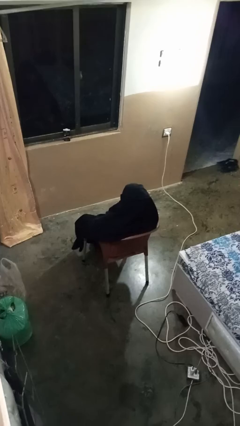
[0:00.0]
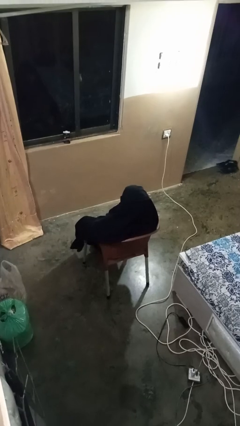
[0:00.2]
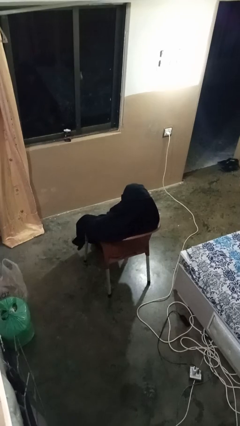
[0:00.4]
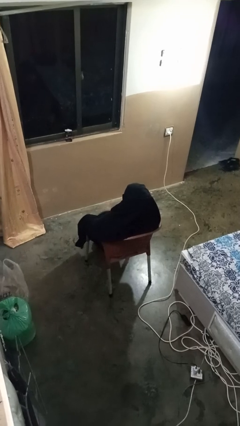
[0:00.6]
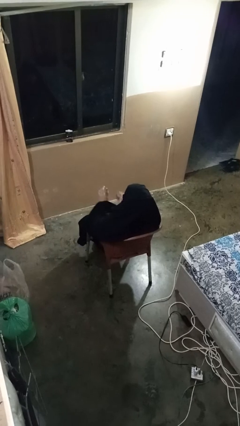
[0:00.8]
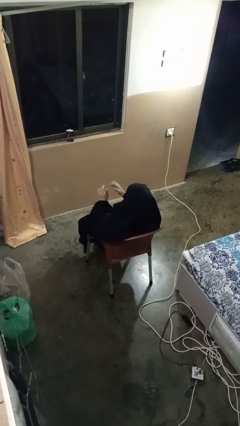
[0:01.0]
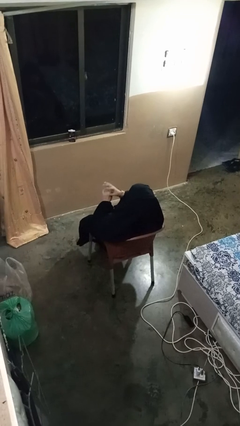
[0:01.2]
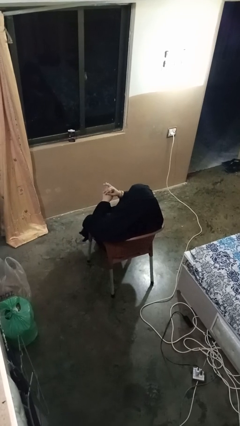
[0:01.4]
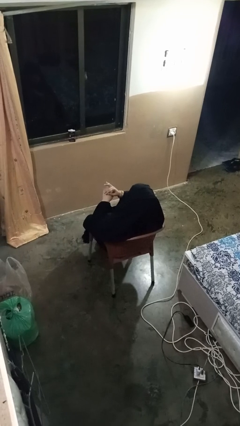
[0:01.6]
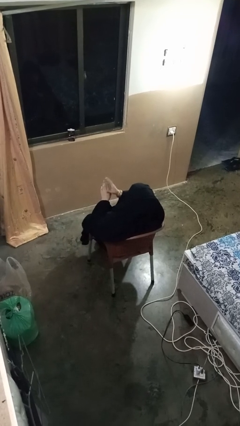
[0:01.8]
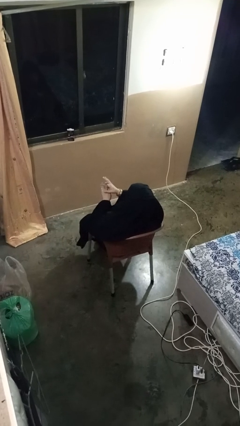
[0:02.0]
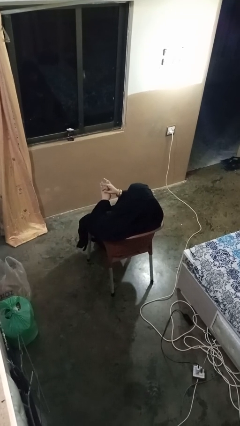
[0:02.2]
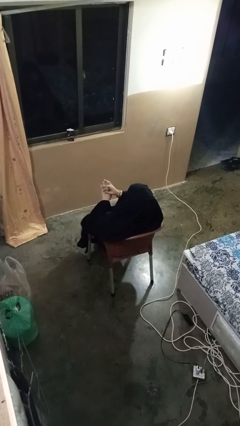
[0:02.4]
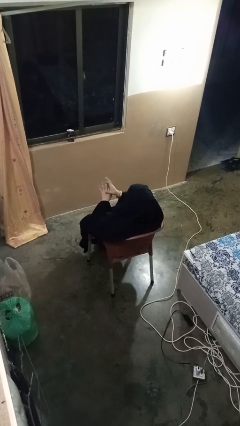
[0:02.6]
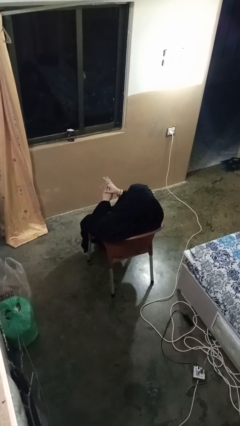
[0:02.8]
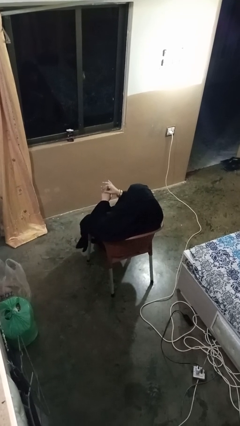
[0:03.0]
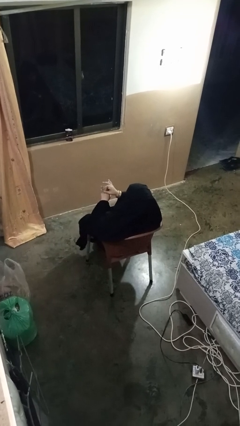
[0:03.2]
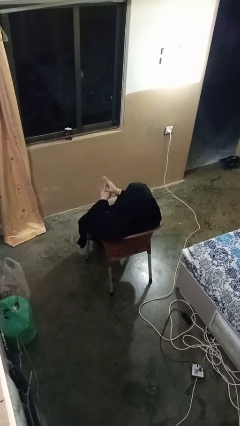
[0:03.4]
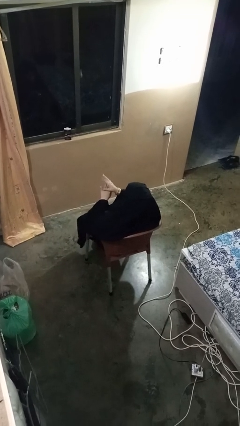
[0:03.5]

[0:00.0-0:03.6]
person cracks knuckles

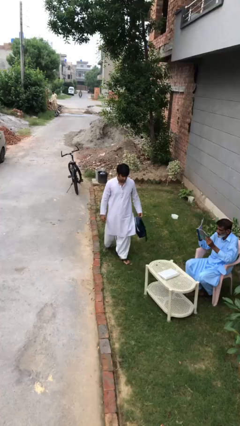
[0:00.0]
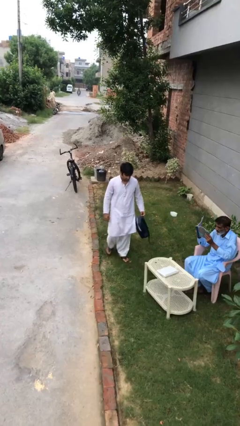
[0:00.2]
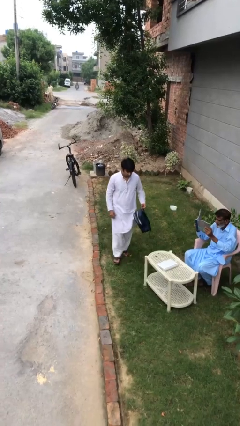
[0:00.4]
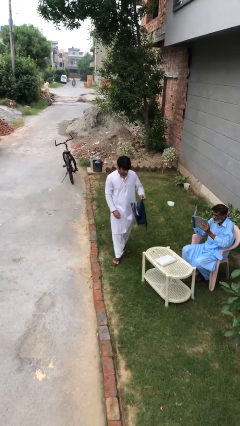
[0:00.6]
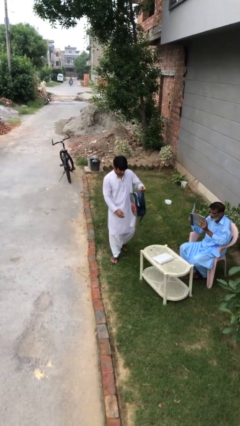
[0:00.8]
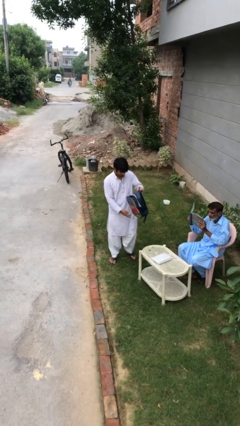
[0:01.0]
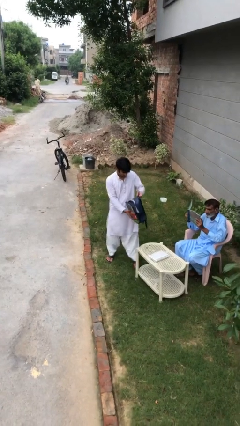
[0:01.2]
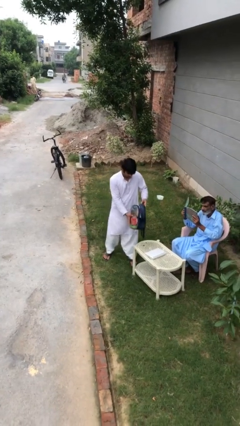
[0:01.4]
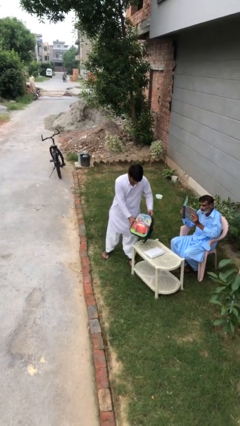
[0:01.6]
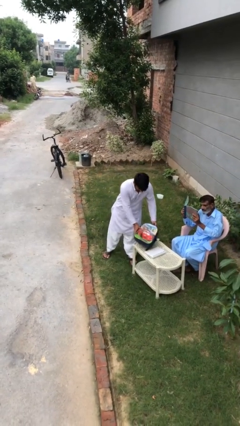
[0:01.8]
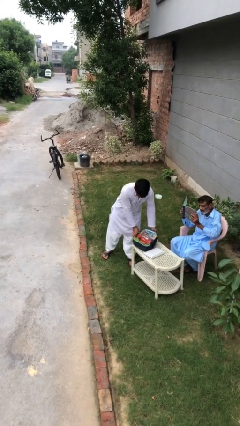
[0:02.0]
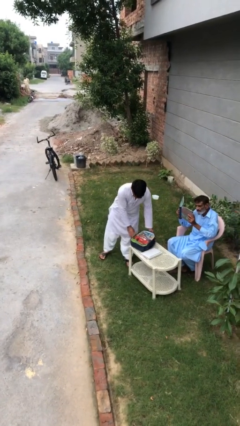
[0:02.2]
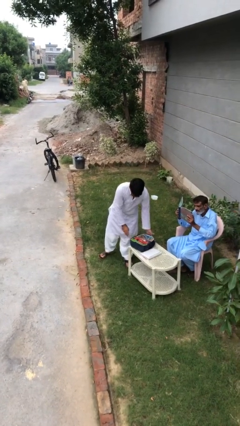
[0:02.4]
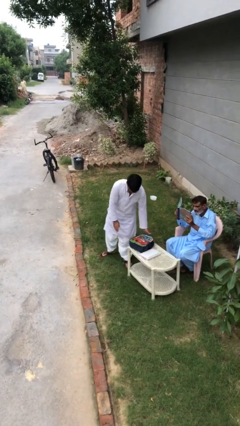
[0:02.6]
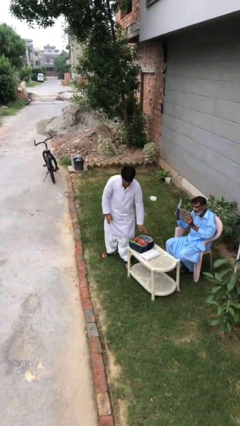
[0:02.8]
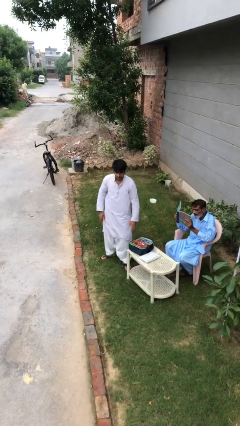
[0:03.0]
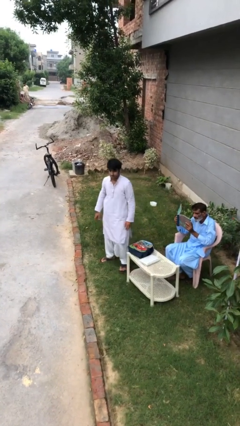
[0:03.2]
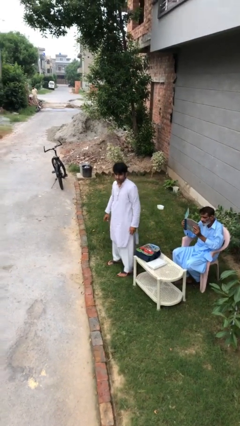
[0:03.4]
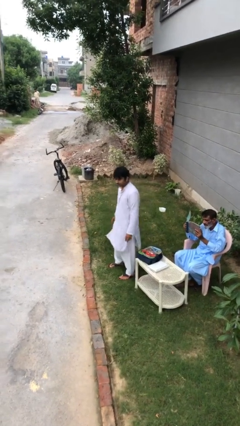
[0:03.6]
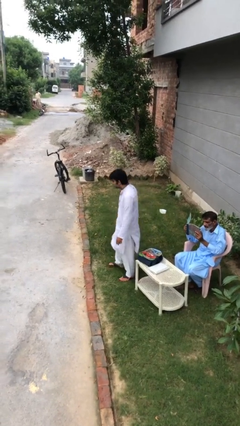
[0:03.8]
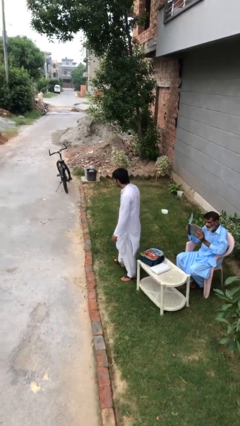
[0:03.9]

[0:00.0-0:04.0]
person puts down object on table

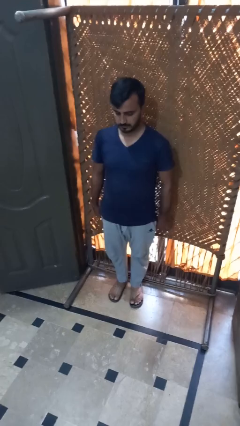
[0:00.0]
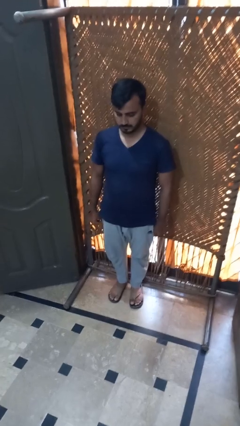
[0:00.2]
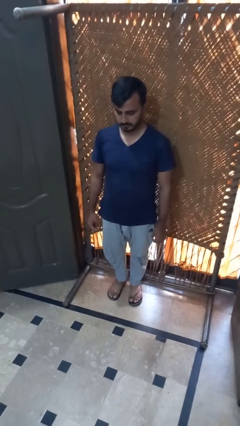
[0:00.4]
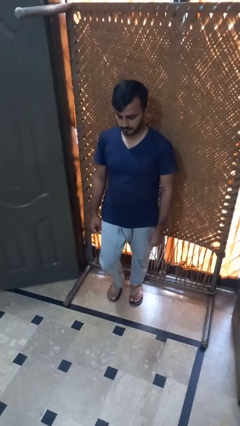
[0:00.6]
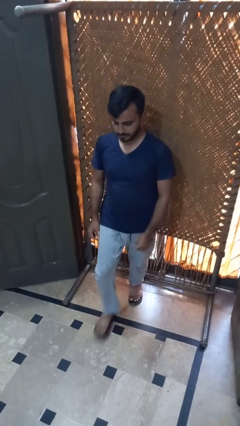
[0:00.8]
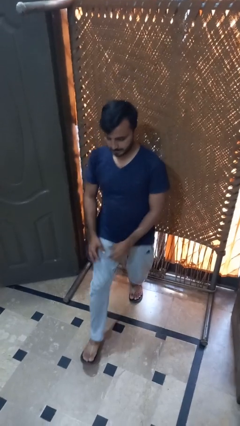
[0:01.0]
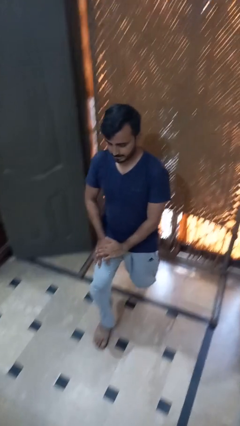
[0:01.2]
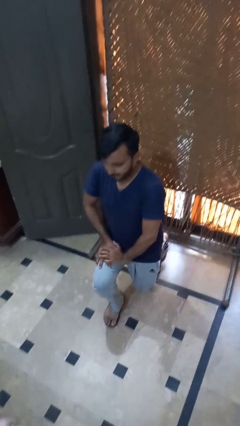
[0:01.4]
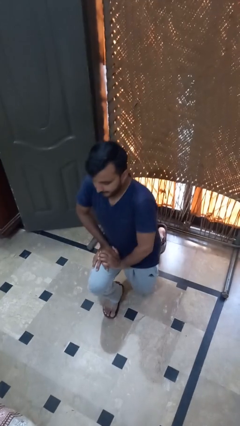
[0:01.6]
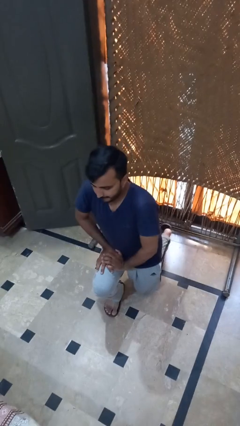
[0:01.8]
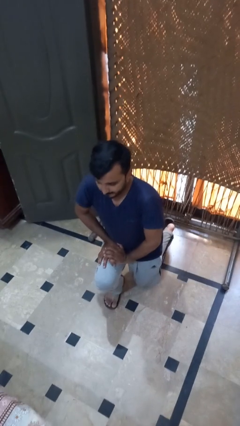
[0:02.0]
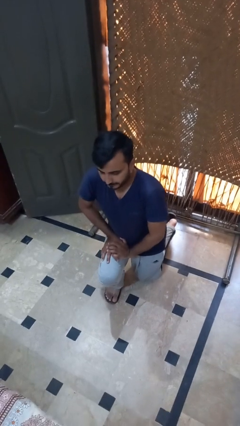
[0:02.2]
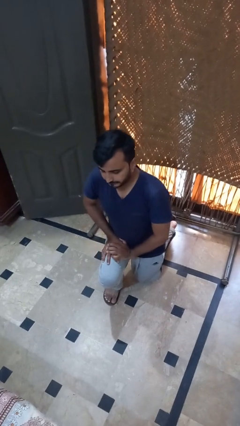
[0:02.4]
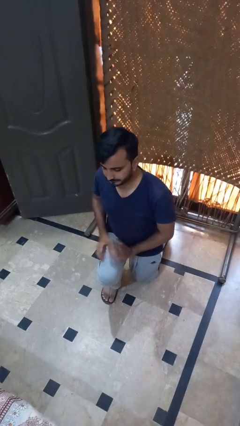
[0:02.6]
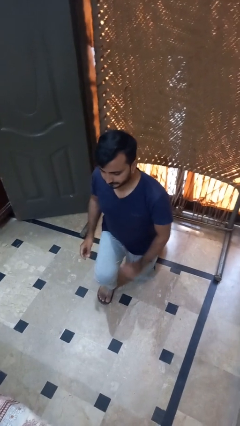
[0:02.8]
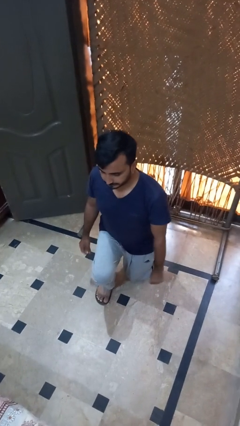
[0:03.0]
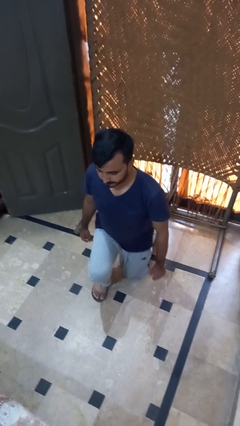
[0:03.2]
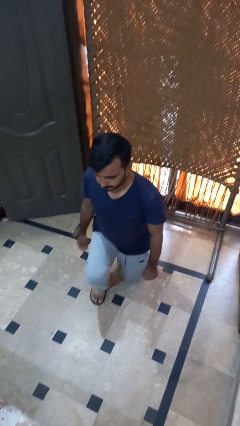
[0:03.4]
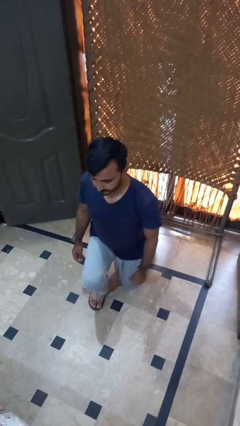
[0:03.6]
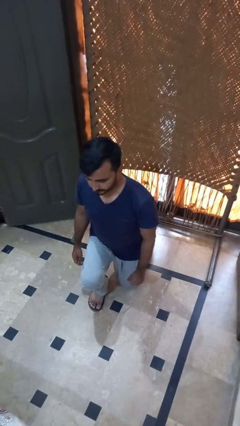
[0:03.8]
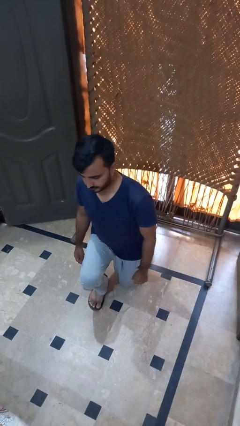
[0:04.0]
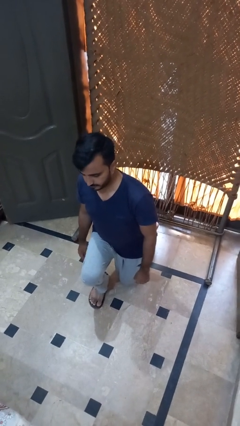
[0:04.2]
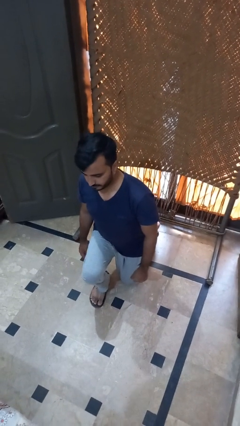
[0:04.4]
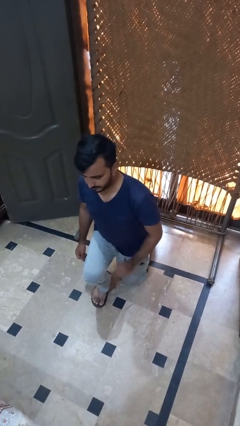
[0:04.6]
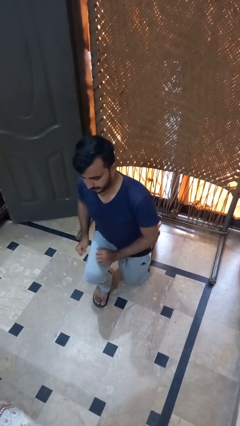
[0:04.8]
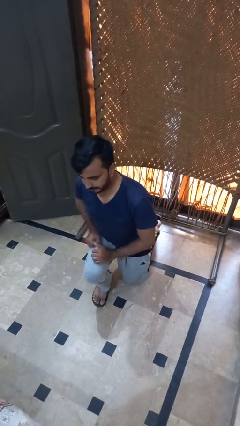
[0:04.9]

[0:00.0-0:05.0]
person exercises with lunges

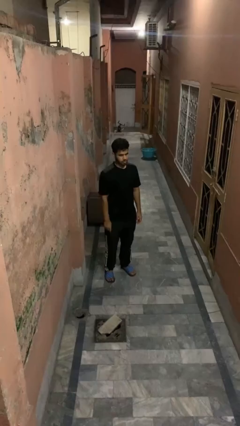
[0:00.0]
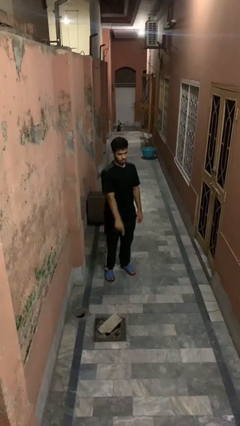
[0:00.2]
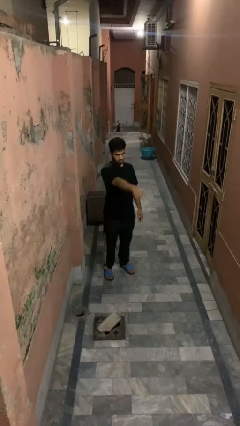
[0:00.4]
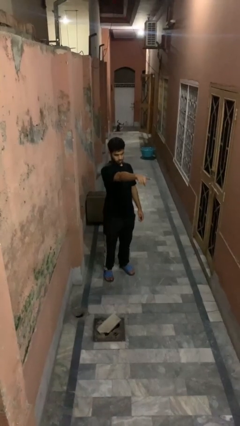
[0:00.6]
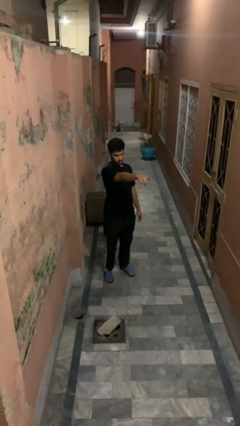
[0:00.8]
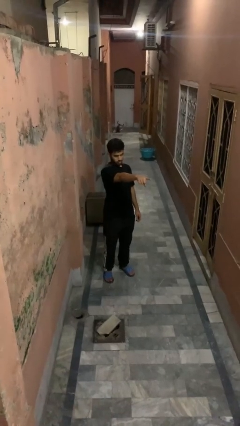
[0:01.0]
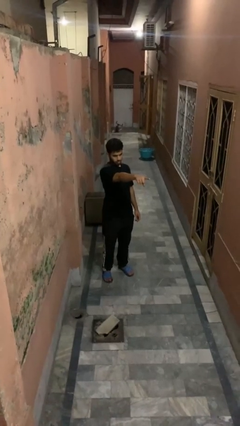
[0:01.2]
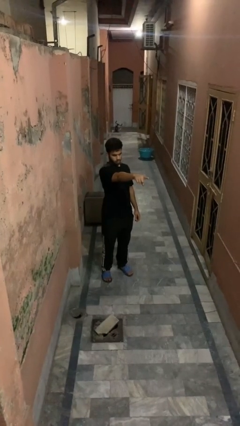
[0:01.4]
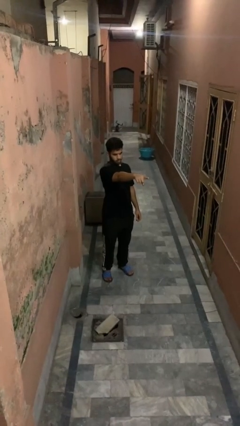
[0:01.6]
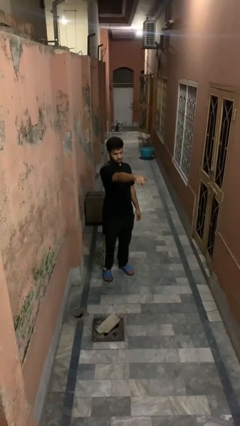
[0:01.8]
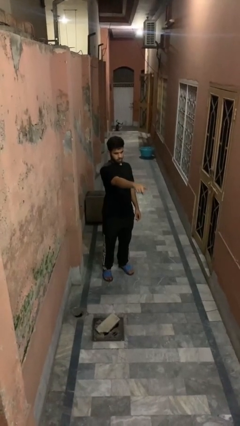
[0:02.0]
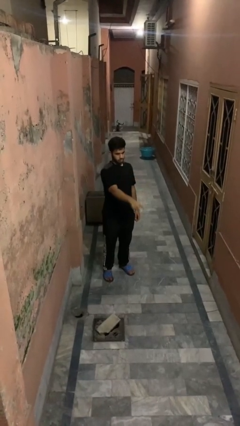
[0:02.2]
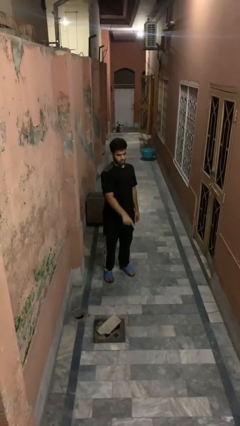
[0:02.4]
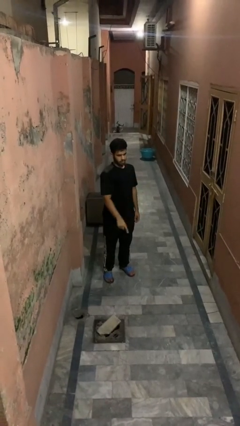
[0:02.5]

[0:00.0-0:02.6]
person points at person

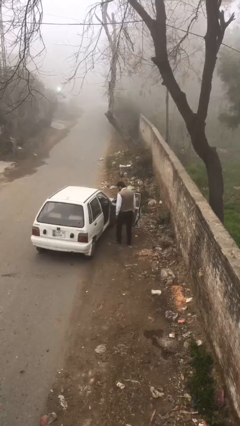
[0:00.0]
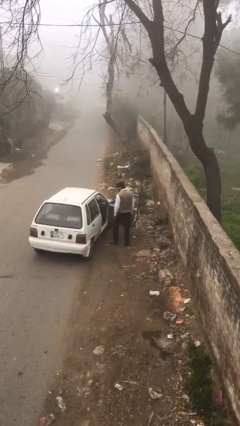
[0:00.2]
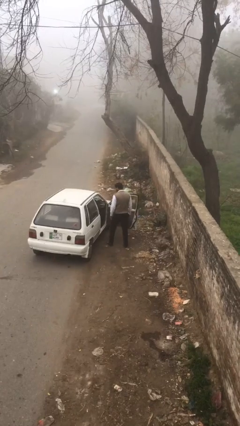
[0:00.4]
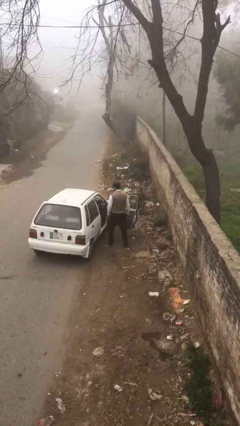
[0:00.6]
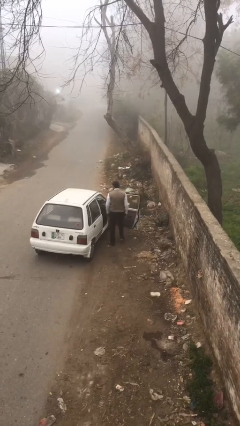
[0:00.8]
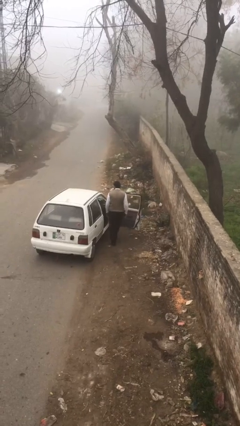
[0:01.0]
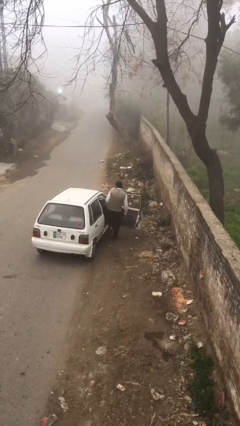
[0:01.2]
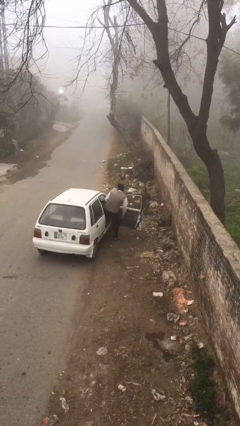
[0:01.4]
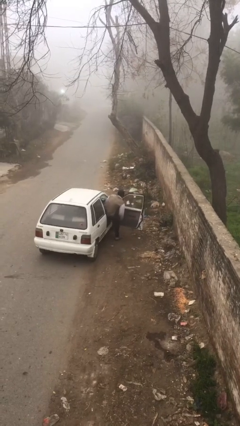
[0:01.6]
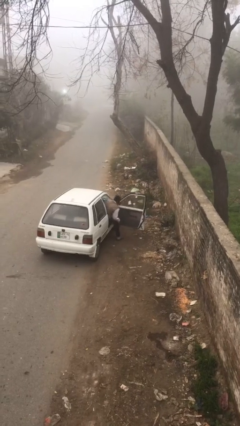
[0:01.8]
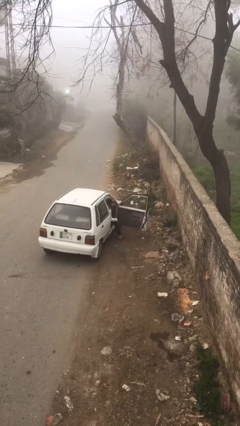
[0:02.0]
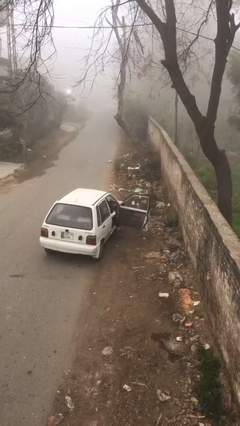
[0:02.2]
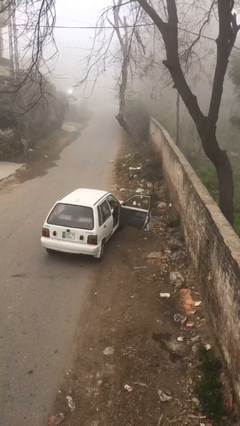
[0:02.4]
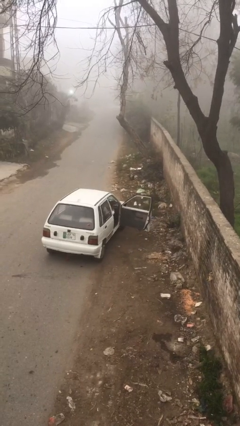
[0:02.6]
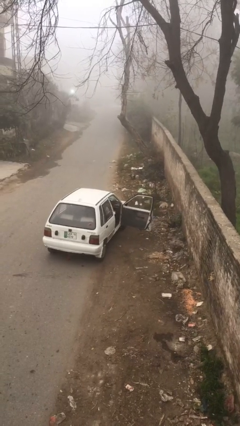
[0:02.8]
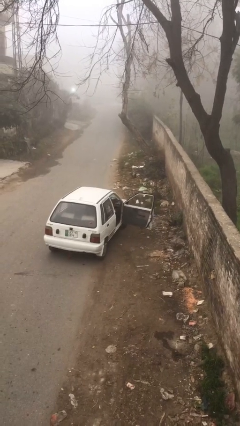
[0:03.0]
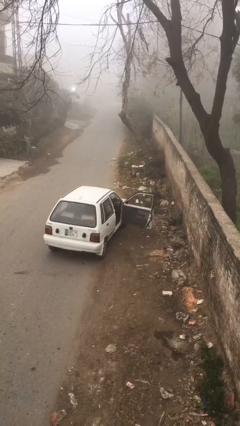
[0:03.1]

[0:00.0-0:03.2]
person enters car
